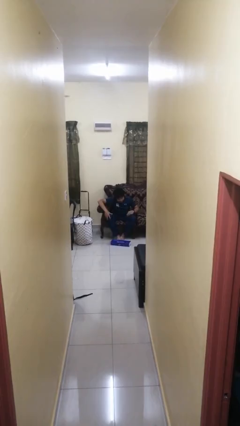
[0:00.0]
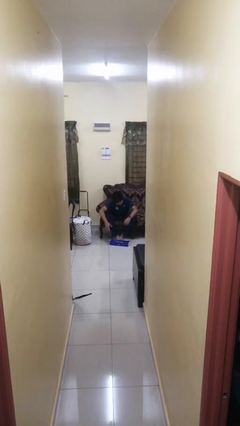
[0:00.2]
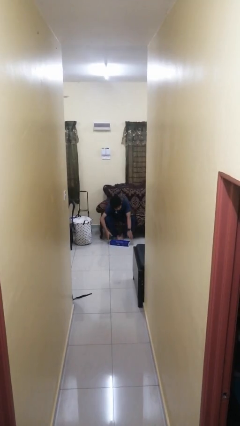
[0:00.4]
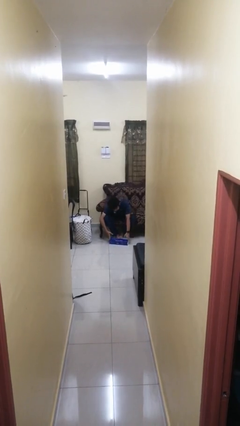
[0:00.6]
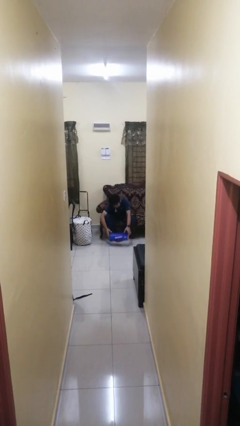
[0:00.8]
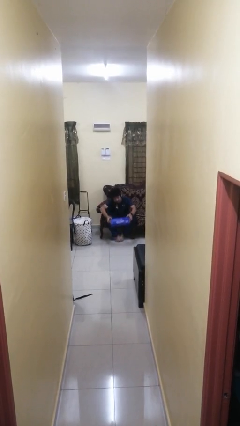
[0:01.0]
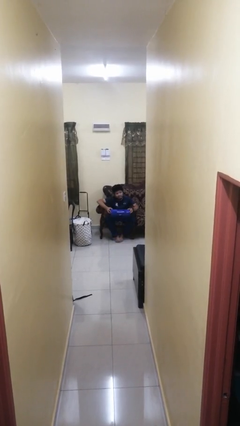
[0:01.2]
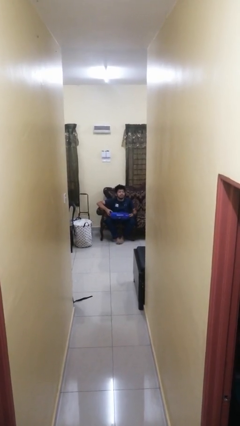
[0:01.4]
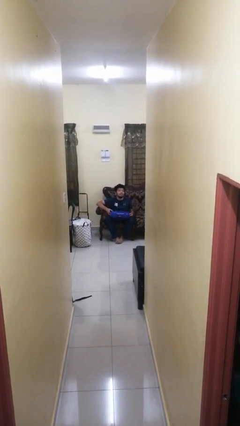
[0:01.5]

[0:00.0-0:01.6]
person picks up object from floor

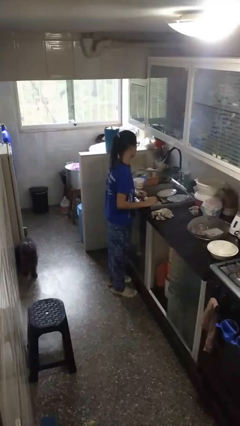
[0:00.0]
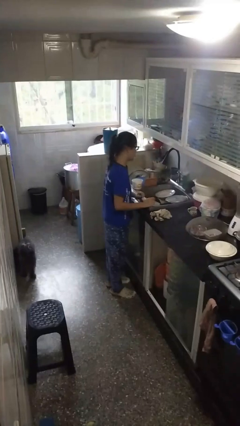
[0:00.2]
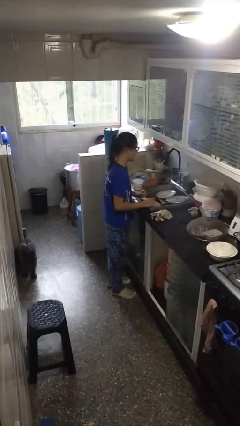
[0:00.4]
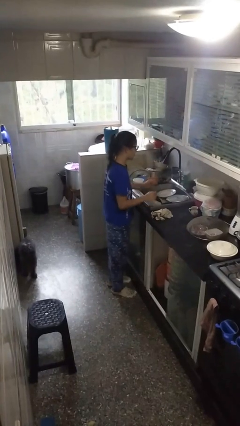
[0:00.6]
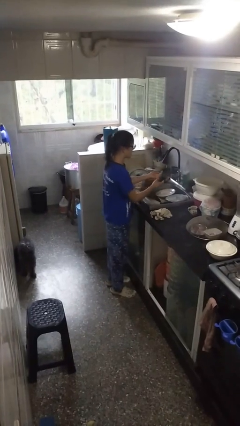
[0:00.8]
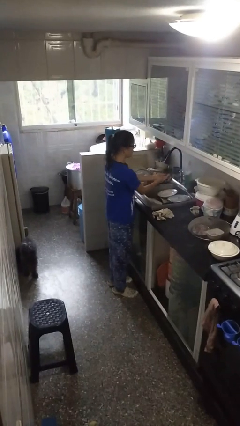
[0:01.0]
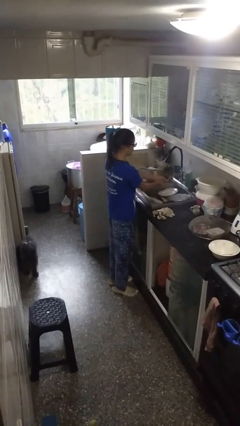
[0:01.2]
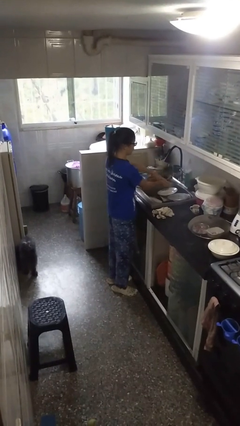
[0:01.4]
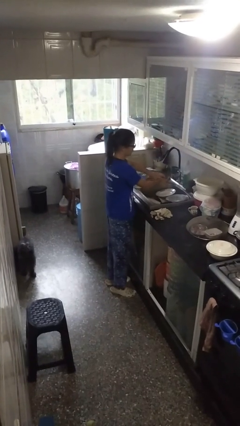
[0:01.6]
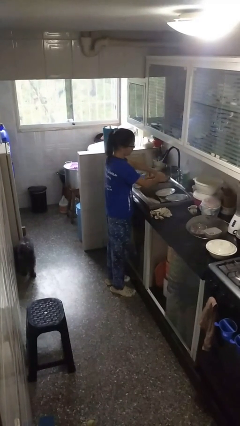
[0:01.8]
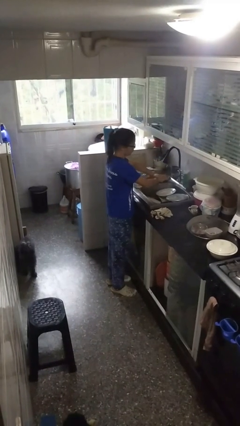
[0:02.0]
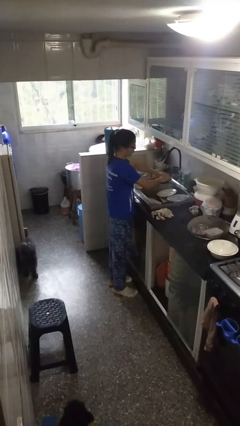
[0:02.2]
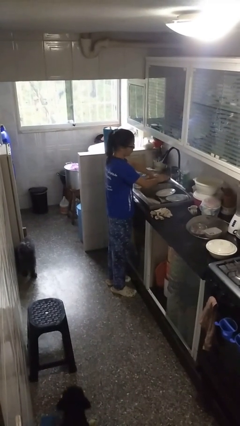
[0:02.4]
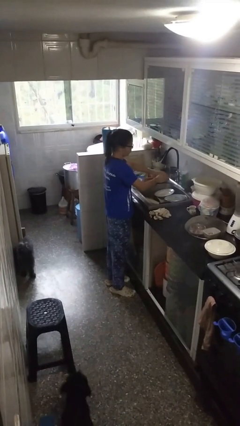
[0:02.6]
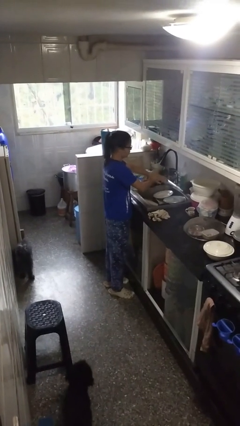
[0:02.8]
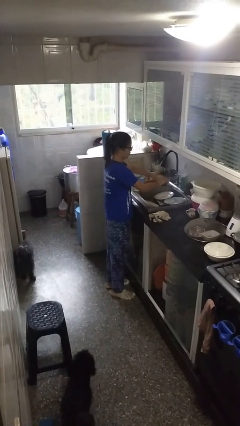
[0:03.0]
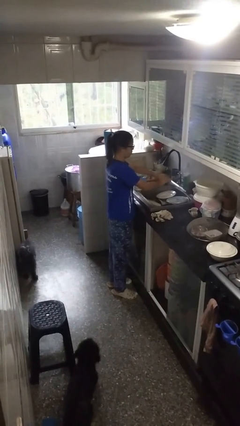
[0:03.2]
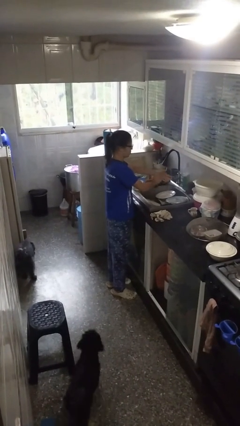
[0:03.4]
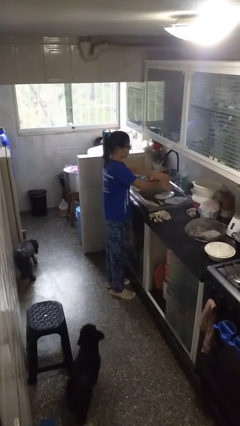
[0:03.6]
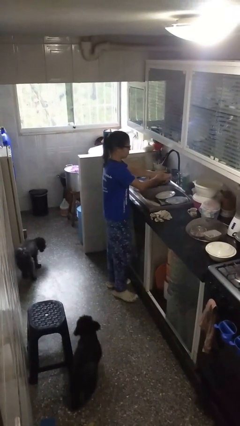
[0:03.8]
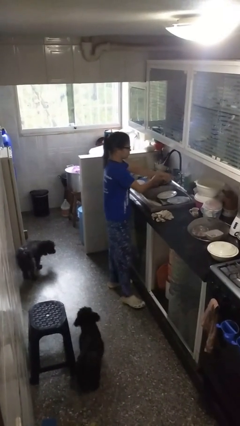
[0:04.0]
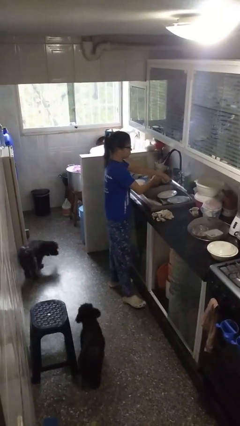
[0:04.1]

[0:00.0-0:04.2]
person washes hands

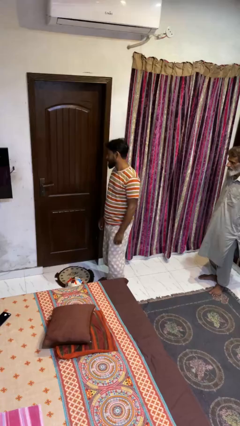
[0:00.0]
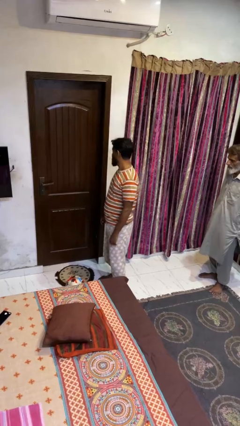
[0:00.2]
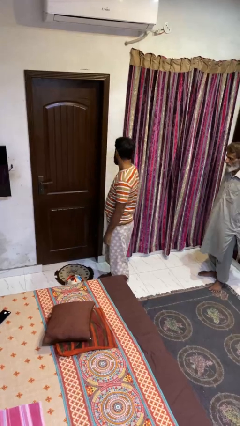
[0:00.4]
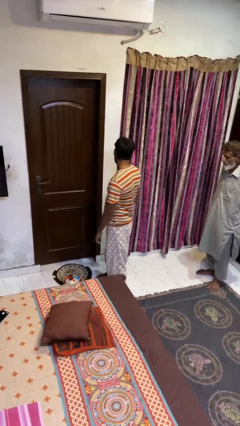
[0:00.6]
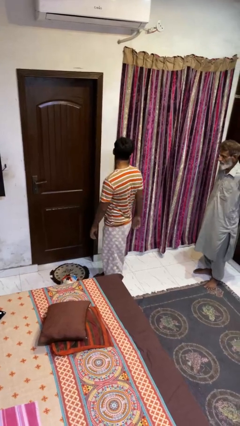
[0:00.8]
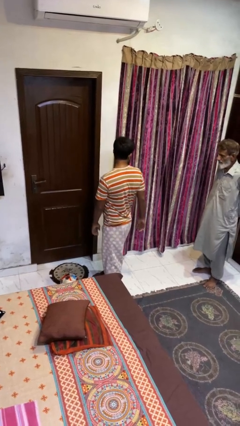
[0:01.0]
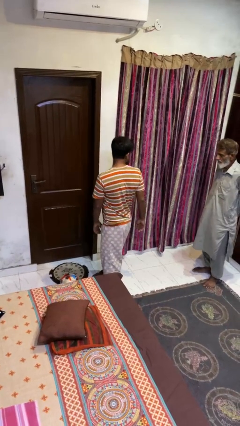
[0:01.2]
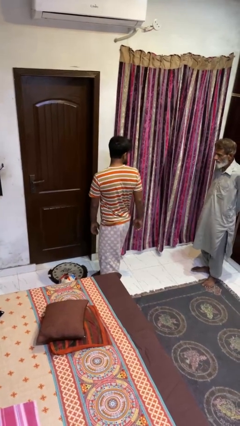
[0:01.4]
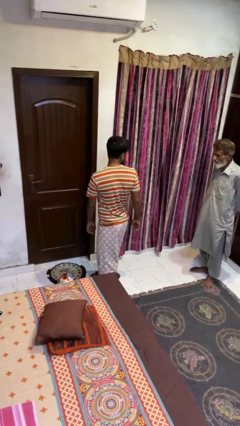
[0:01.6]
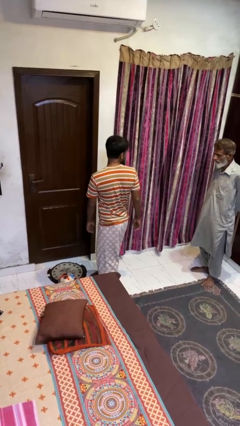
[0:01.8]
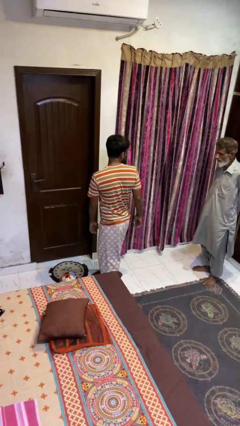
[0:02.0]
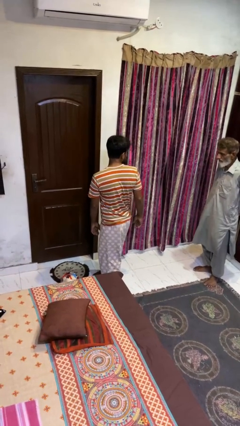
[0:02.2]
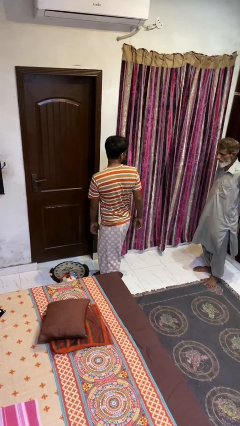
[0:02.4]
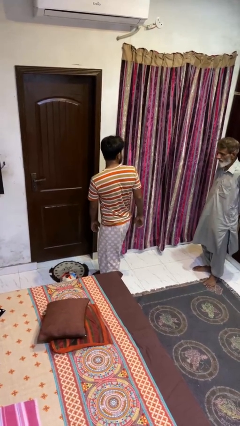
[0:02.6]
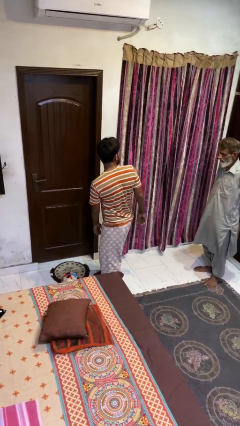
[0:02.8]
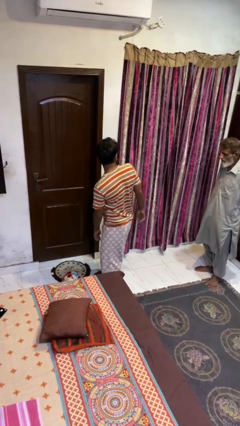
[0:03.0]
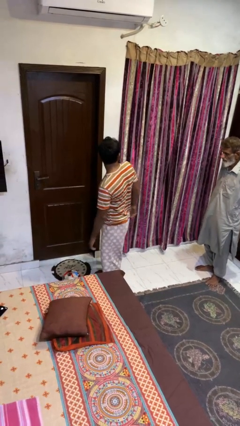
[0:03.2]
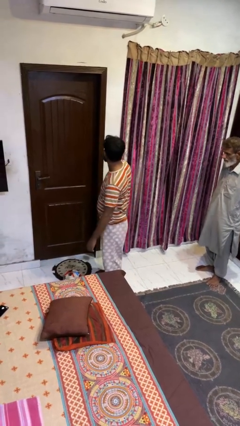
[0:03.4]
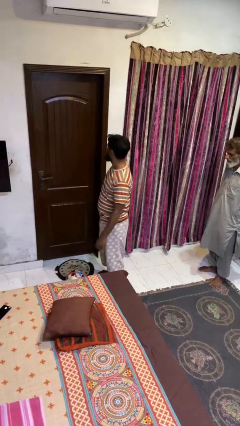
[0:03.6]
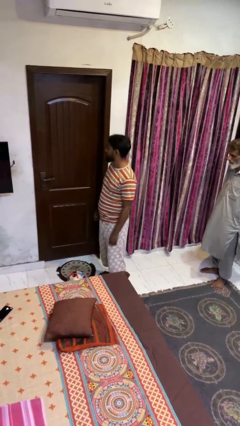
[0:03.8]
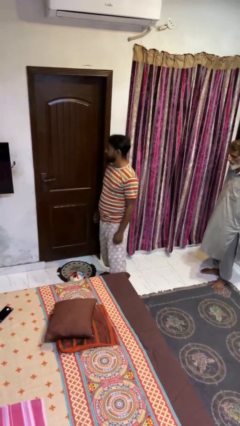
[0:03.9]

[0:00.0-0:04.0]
person looks over shoulder

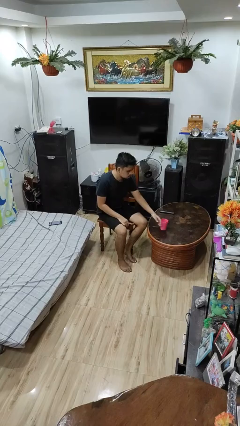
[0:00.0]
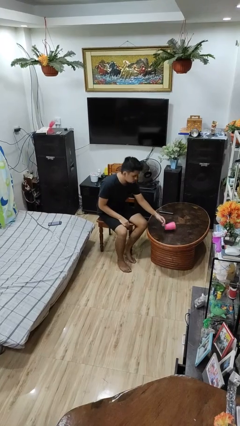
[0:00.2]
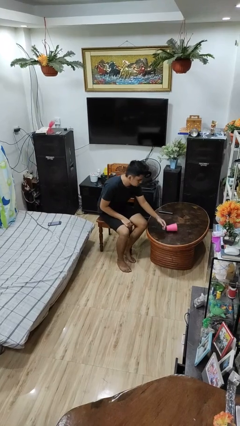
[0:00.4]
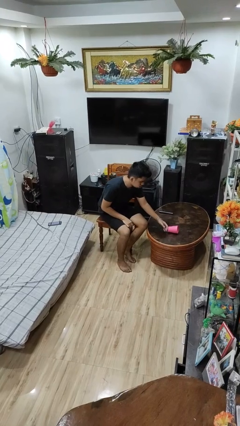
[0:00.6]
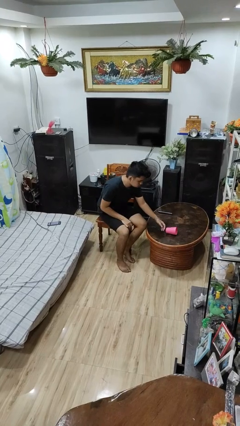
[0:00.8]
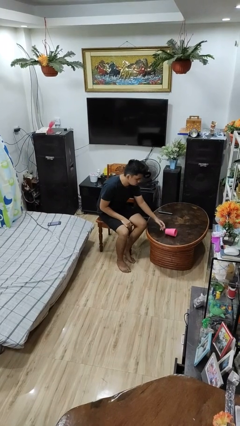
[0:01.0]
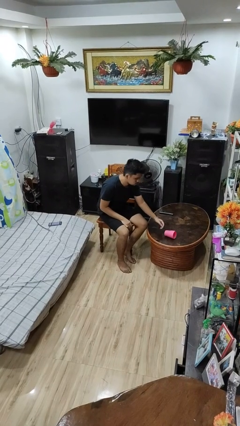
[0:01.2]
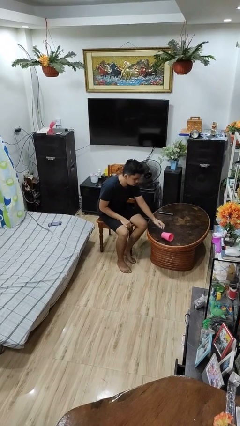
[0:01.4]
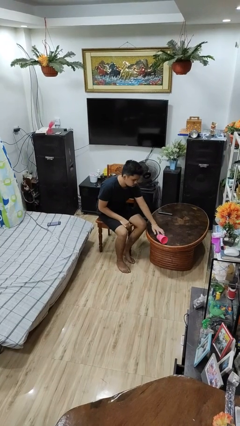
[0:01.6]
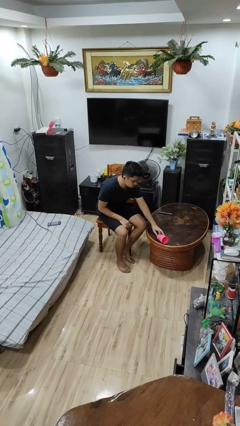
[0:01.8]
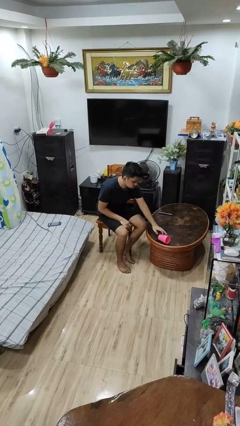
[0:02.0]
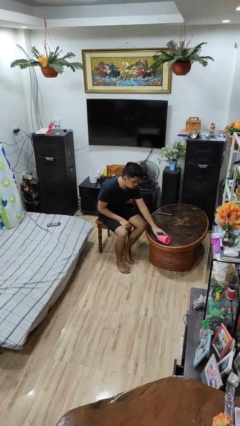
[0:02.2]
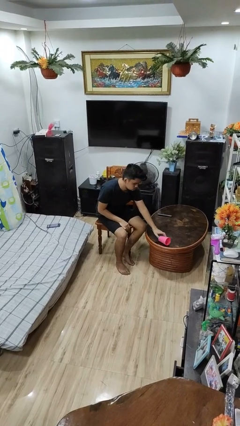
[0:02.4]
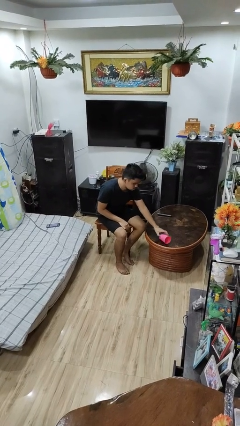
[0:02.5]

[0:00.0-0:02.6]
person knocks over glass

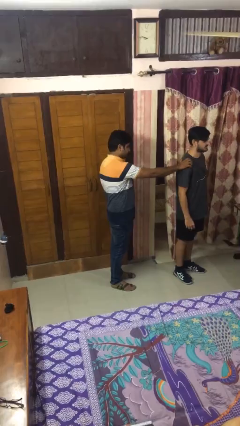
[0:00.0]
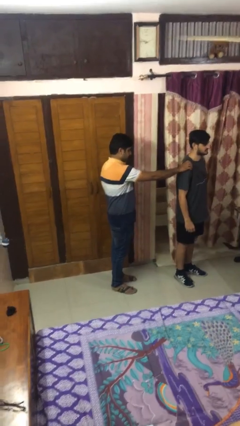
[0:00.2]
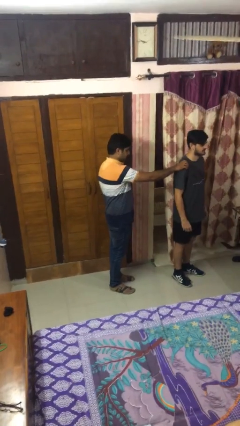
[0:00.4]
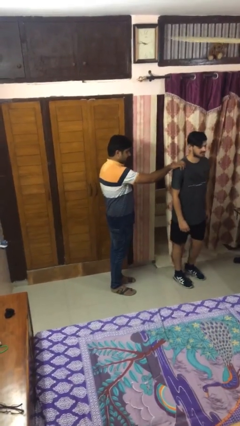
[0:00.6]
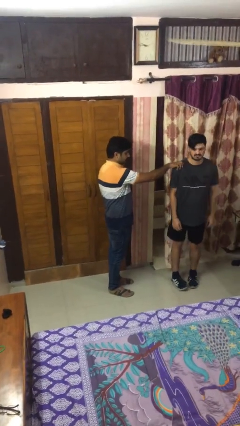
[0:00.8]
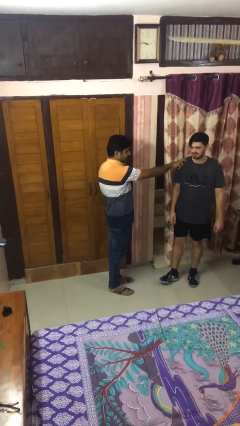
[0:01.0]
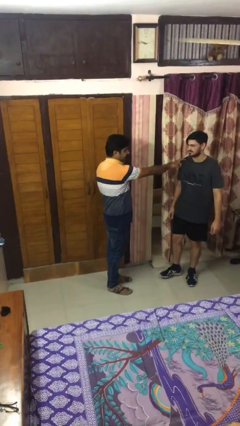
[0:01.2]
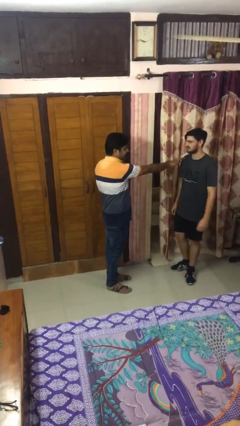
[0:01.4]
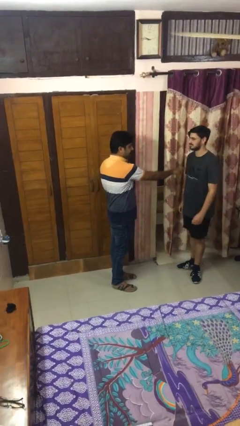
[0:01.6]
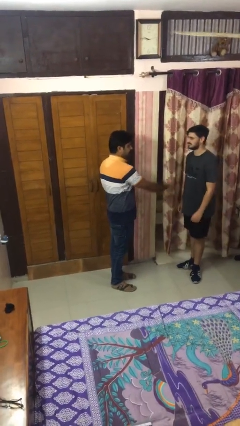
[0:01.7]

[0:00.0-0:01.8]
person spins person around

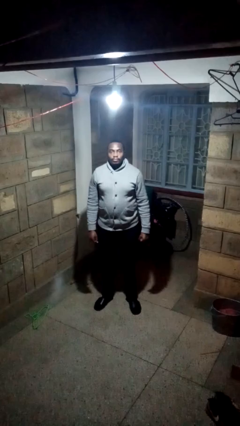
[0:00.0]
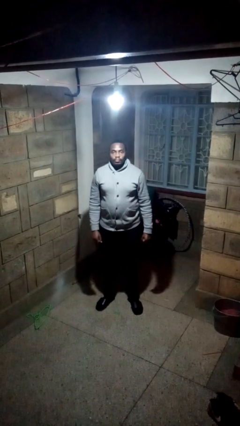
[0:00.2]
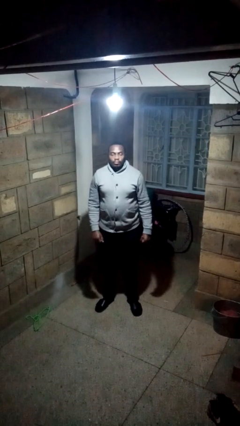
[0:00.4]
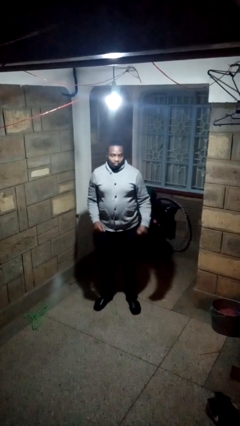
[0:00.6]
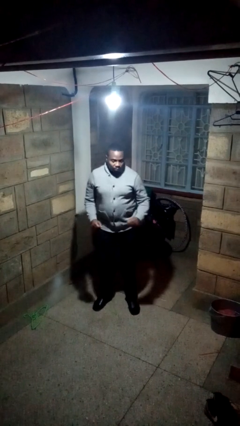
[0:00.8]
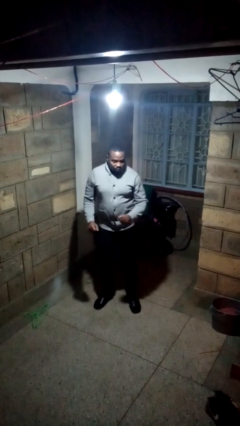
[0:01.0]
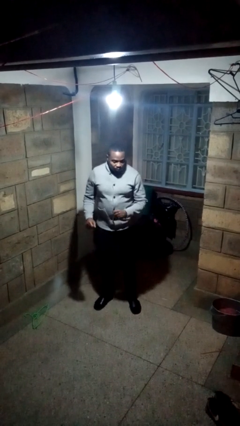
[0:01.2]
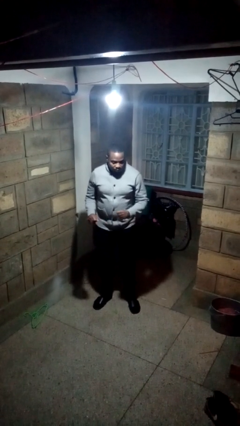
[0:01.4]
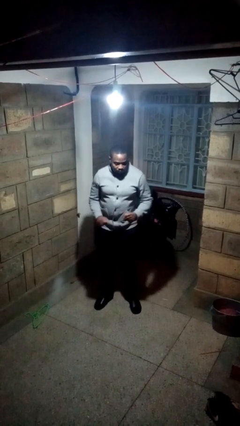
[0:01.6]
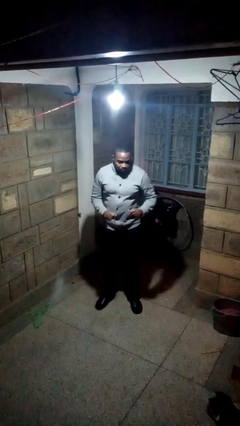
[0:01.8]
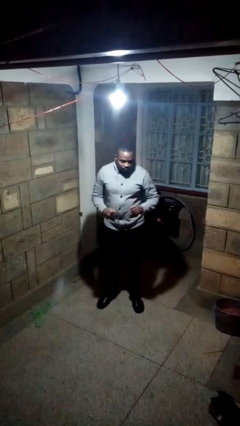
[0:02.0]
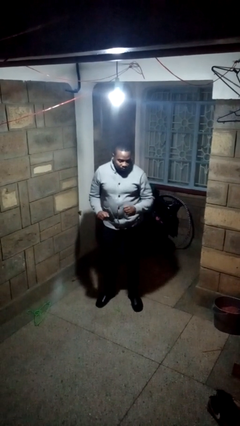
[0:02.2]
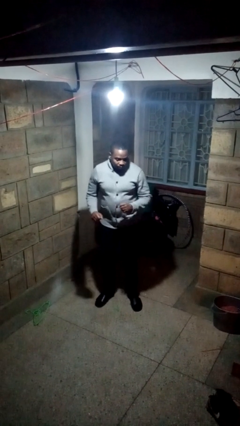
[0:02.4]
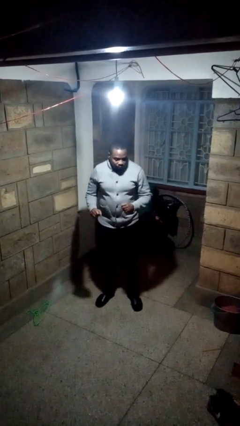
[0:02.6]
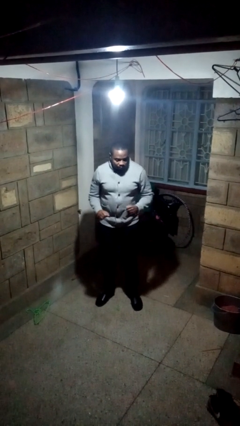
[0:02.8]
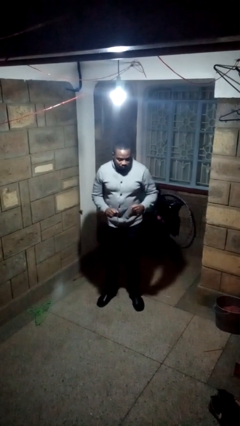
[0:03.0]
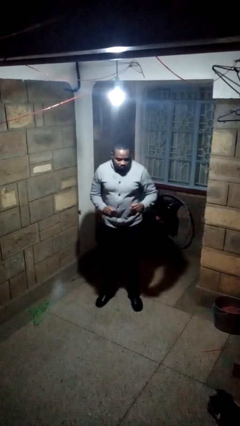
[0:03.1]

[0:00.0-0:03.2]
person dances in place
